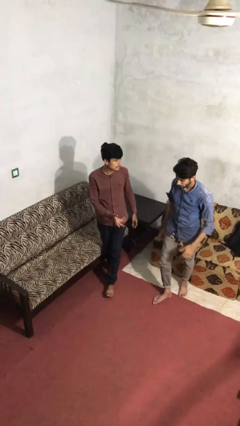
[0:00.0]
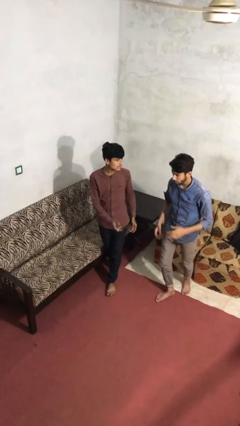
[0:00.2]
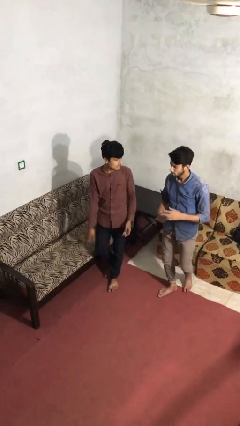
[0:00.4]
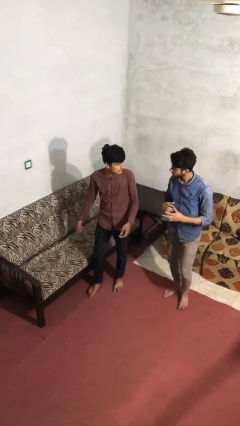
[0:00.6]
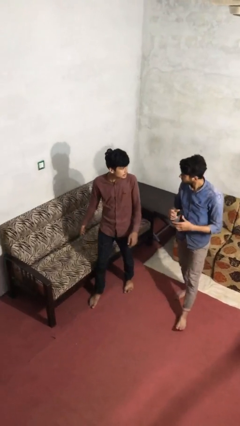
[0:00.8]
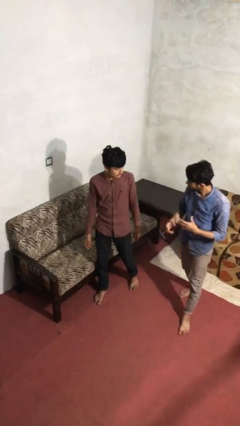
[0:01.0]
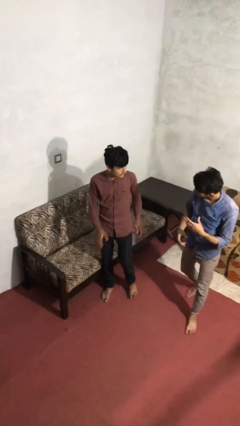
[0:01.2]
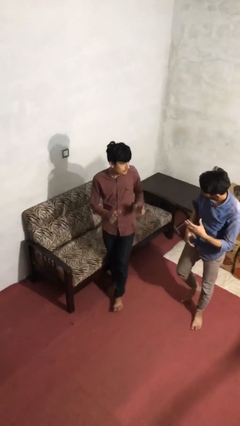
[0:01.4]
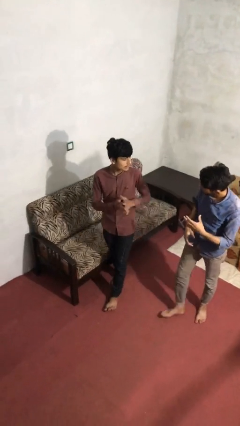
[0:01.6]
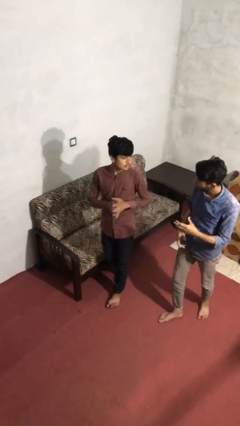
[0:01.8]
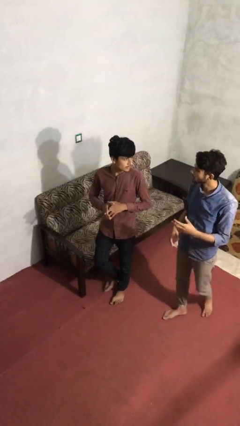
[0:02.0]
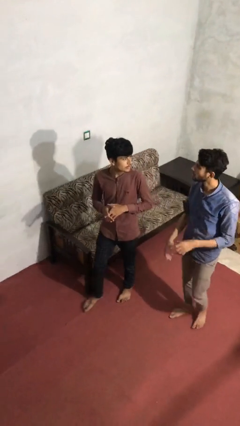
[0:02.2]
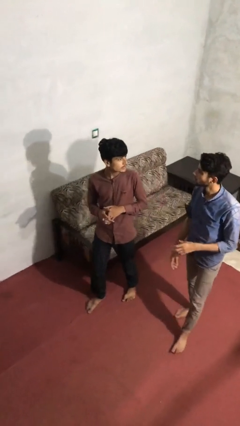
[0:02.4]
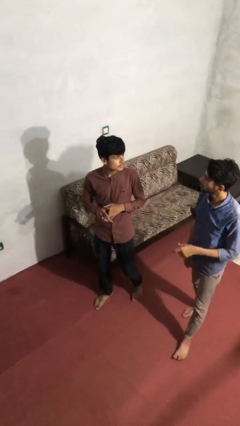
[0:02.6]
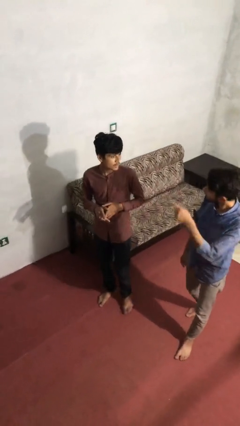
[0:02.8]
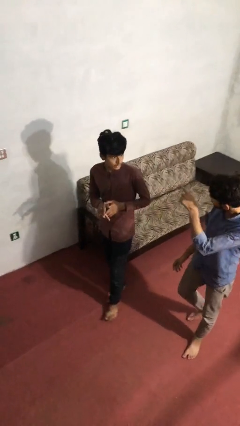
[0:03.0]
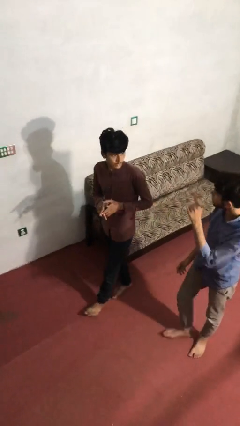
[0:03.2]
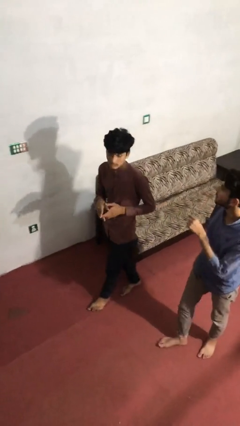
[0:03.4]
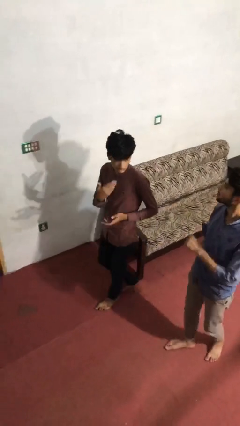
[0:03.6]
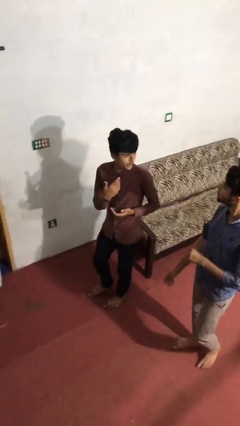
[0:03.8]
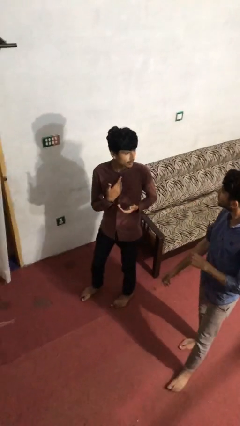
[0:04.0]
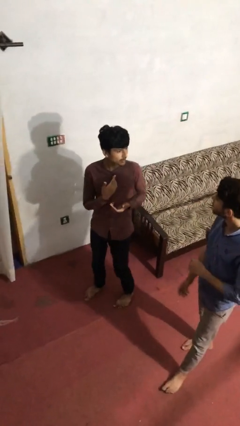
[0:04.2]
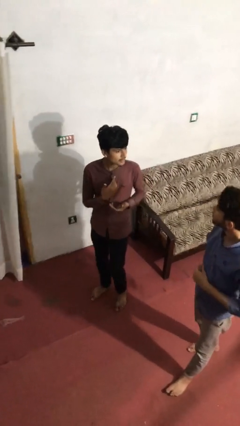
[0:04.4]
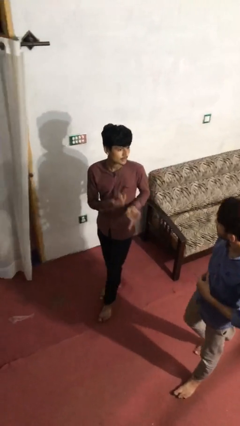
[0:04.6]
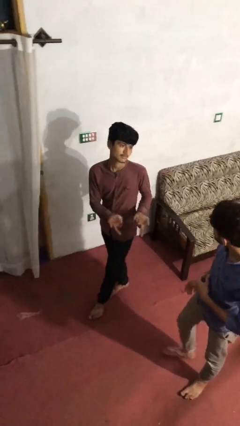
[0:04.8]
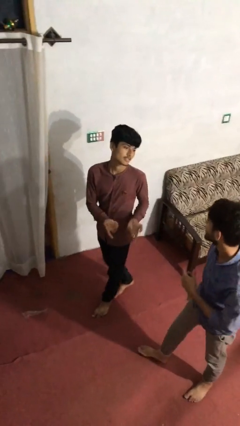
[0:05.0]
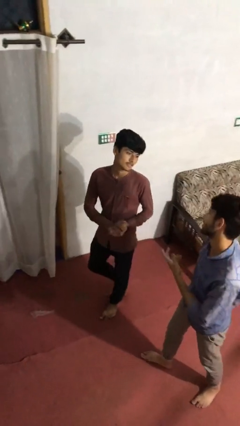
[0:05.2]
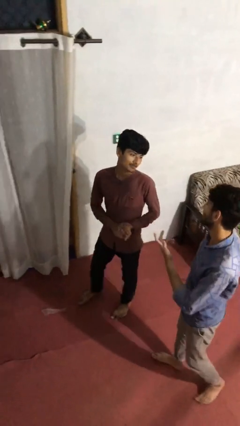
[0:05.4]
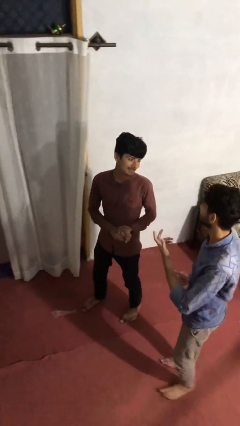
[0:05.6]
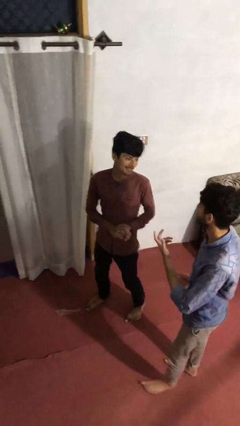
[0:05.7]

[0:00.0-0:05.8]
person talks to person

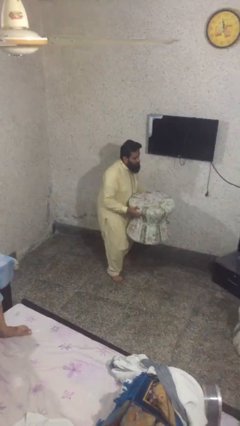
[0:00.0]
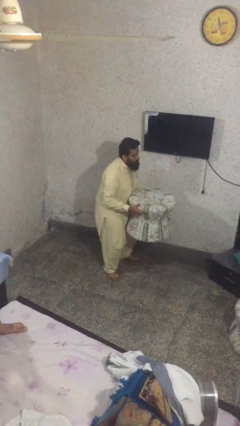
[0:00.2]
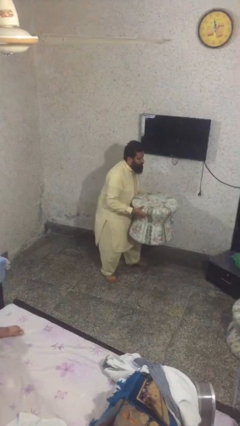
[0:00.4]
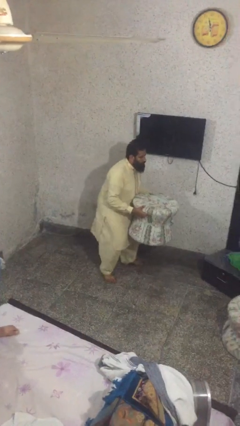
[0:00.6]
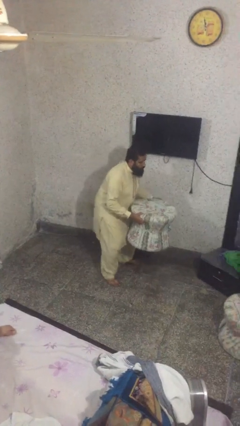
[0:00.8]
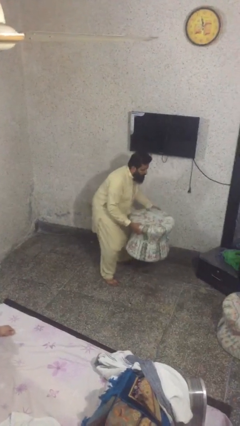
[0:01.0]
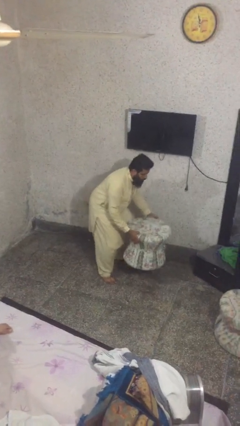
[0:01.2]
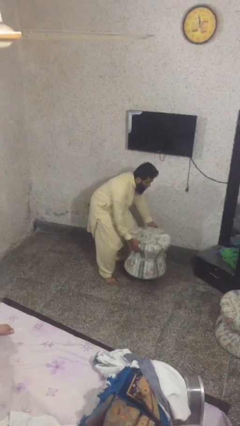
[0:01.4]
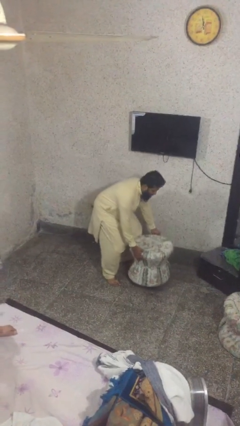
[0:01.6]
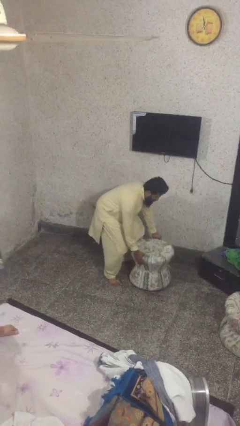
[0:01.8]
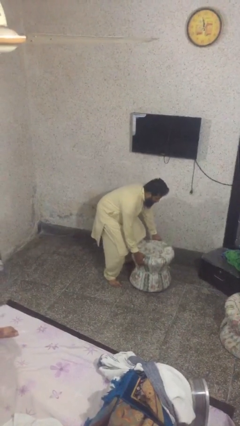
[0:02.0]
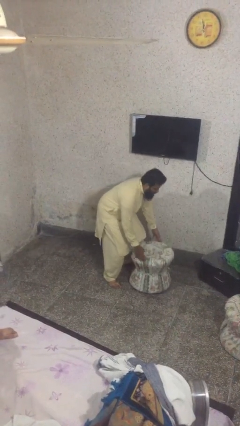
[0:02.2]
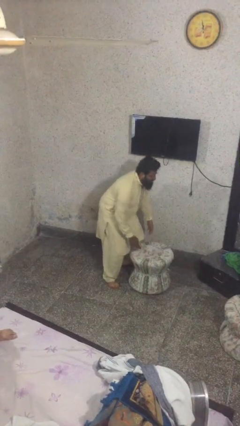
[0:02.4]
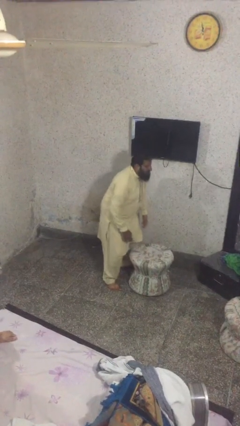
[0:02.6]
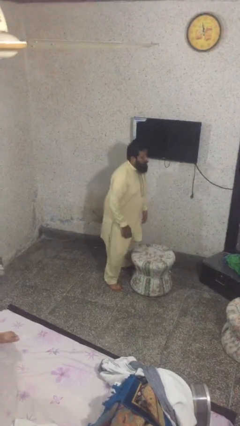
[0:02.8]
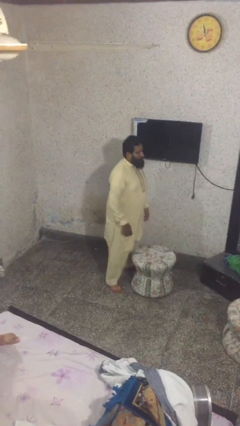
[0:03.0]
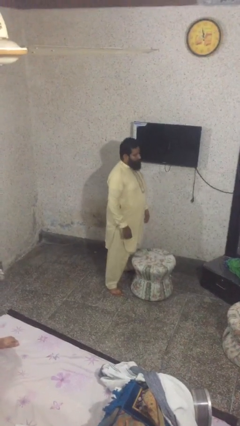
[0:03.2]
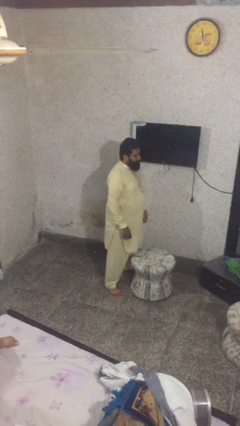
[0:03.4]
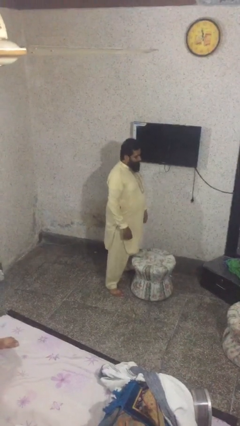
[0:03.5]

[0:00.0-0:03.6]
person puts down object on floor

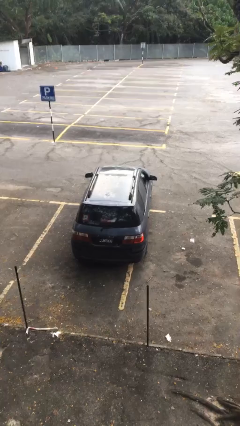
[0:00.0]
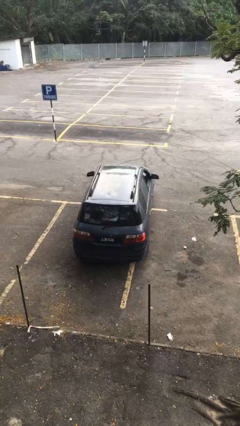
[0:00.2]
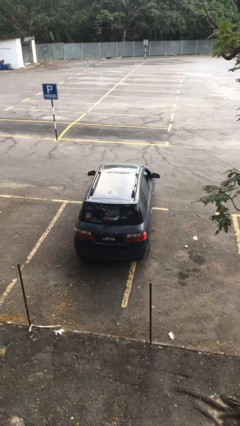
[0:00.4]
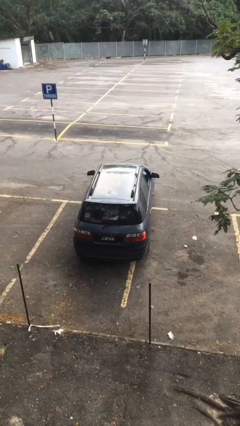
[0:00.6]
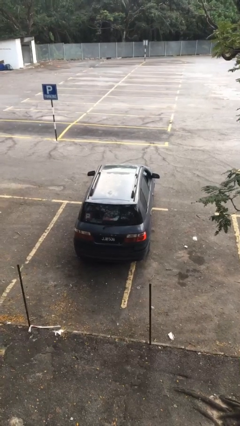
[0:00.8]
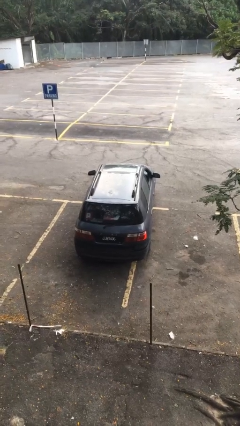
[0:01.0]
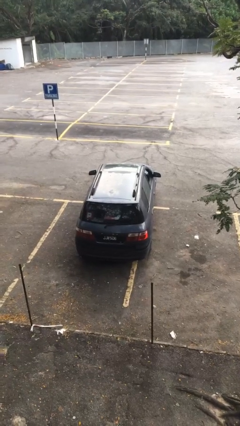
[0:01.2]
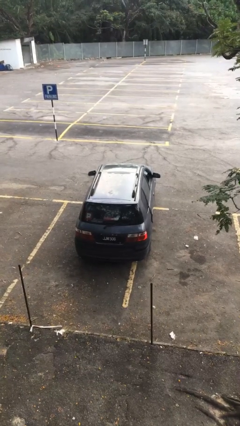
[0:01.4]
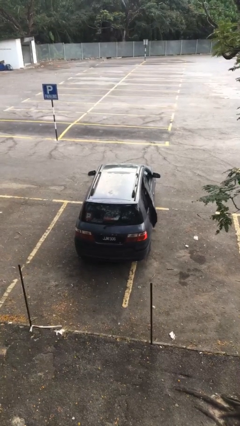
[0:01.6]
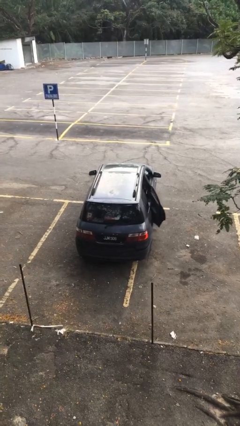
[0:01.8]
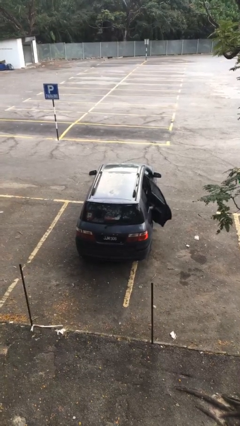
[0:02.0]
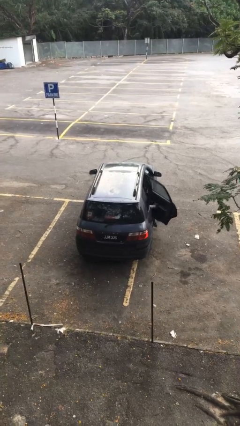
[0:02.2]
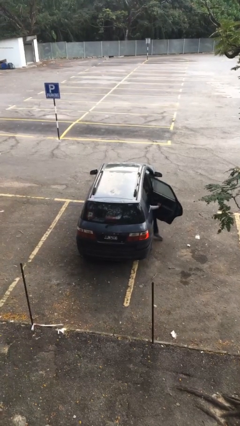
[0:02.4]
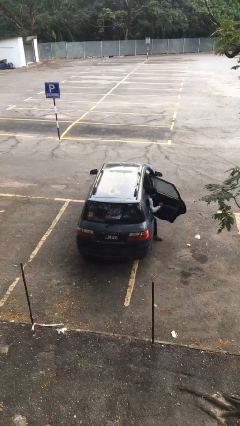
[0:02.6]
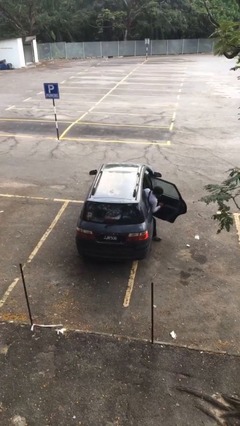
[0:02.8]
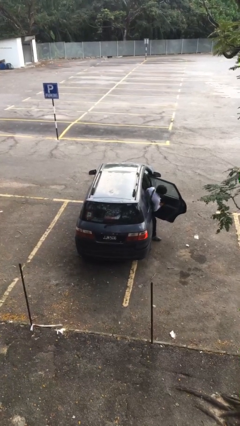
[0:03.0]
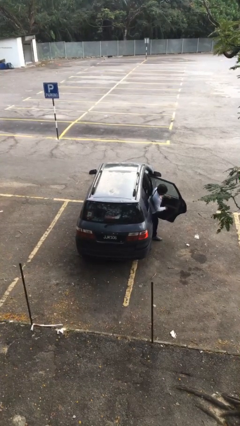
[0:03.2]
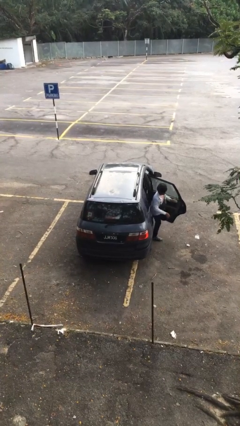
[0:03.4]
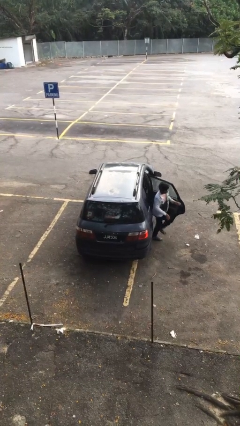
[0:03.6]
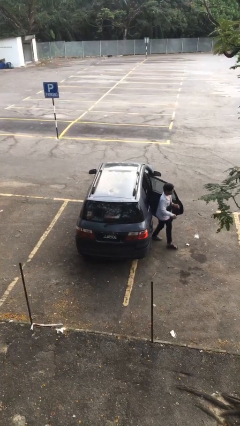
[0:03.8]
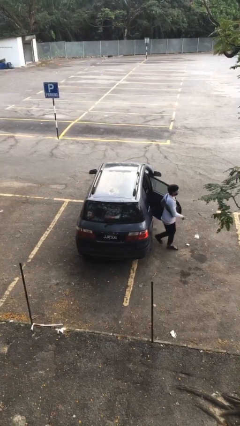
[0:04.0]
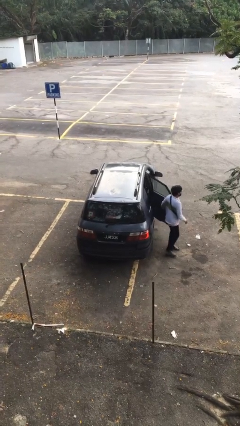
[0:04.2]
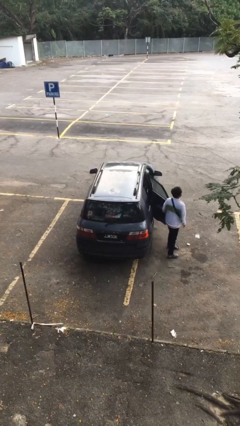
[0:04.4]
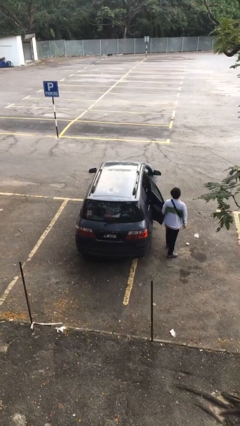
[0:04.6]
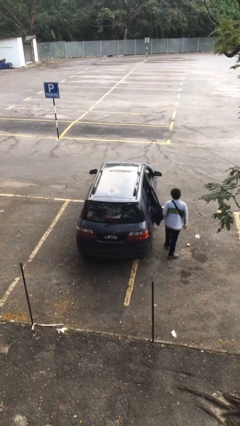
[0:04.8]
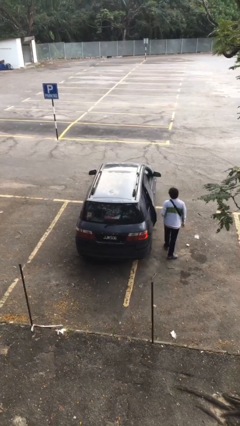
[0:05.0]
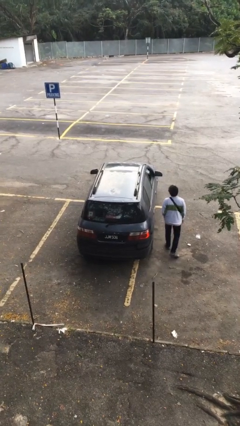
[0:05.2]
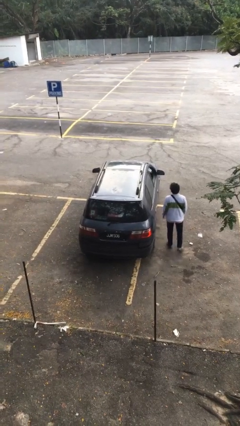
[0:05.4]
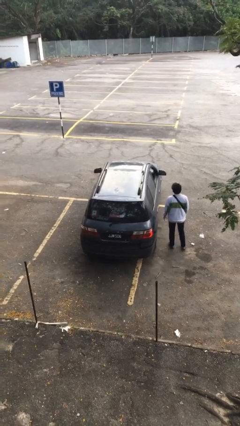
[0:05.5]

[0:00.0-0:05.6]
car drops off person

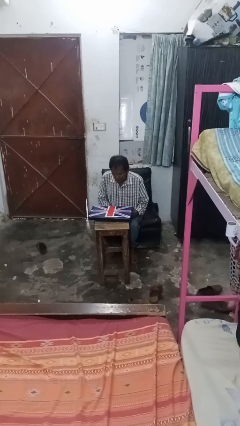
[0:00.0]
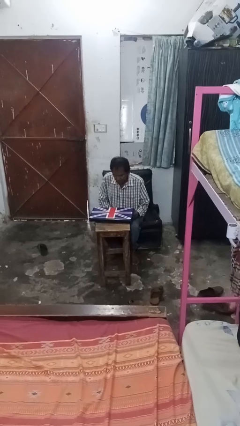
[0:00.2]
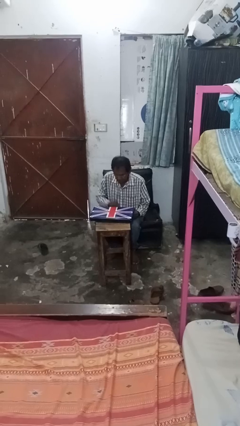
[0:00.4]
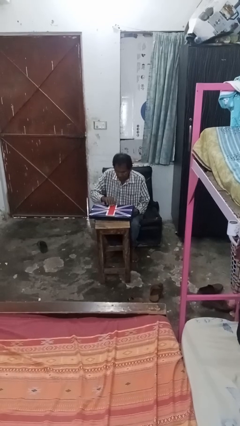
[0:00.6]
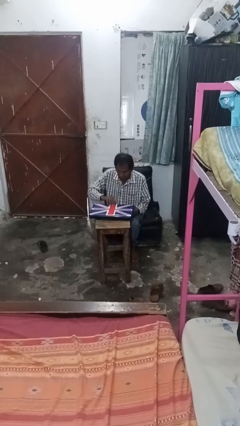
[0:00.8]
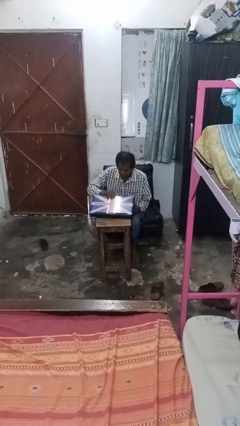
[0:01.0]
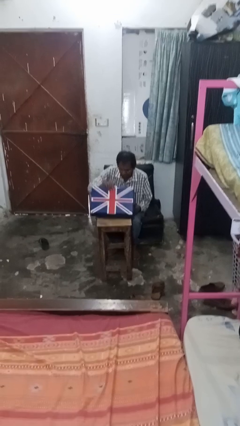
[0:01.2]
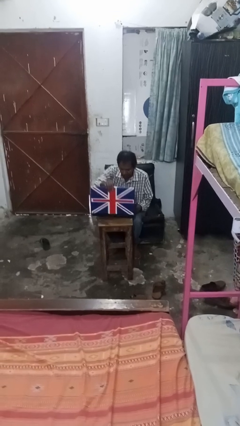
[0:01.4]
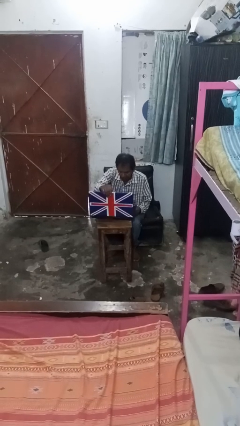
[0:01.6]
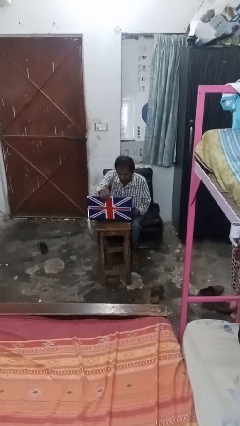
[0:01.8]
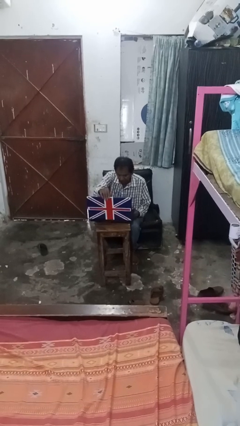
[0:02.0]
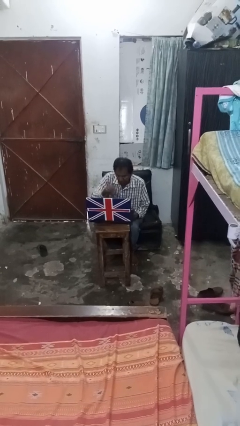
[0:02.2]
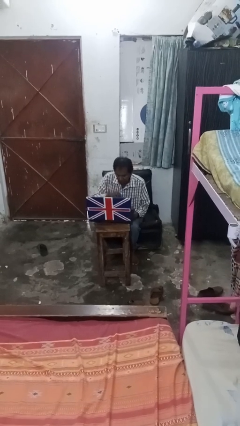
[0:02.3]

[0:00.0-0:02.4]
person opens laptop

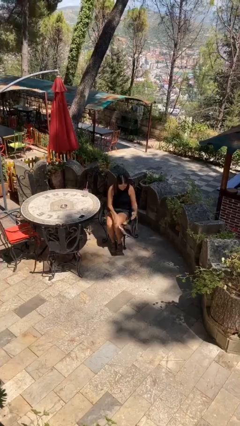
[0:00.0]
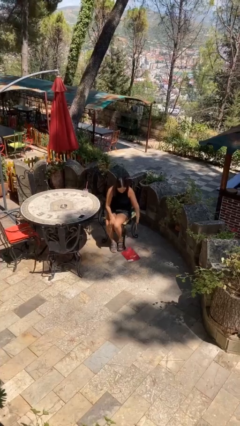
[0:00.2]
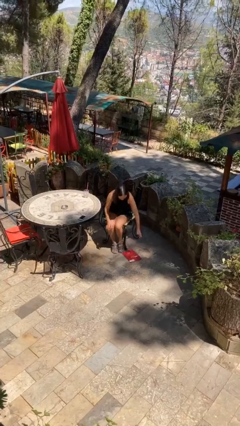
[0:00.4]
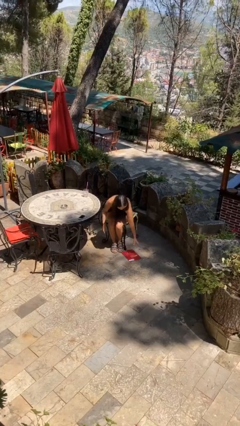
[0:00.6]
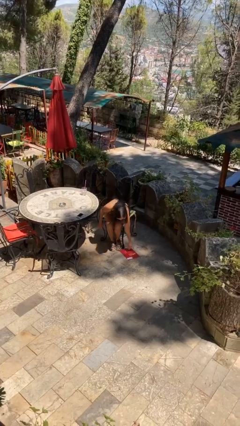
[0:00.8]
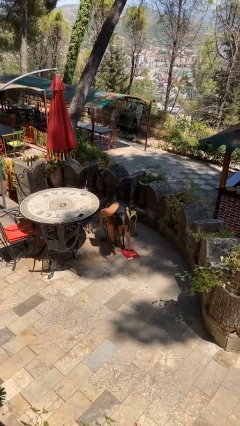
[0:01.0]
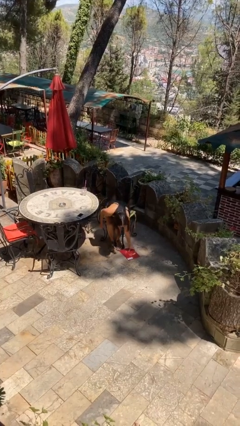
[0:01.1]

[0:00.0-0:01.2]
person drops object
